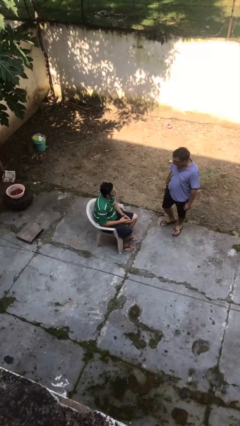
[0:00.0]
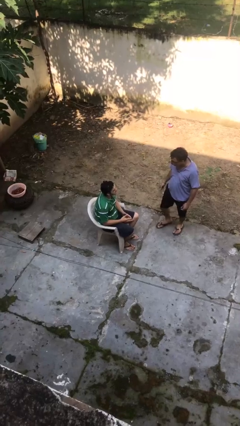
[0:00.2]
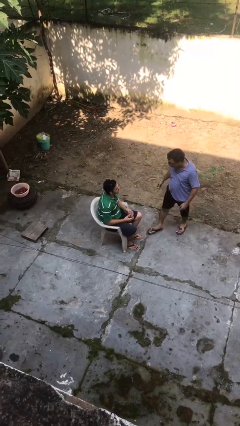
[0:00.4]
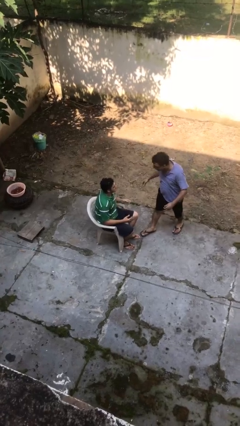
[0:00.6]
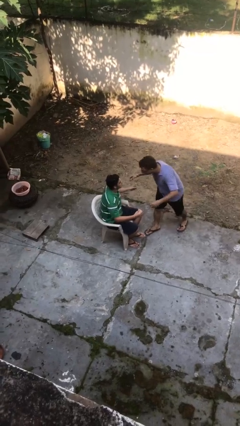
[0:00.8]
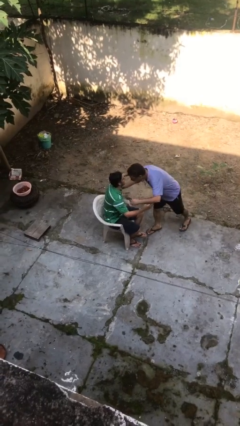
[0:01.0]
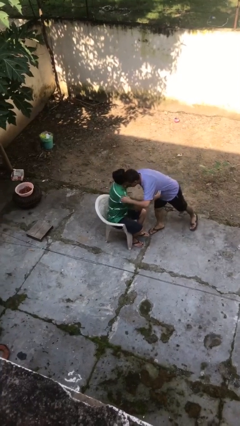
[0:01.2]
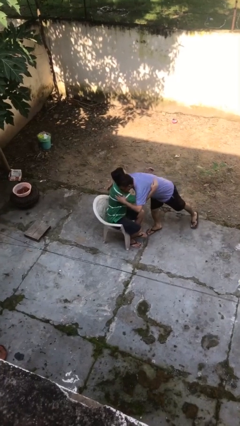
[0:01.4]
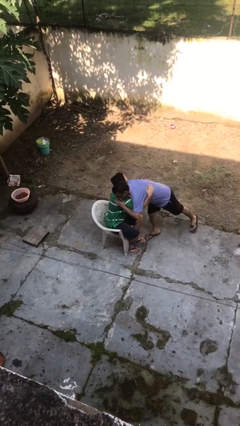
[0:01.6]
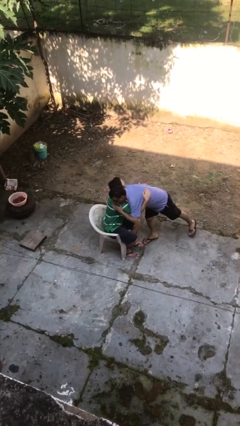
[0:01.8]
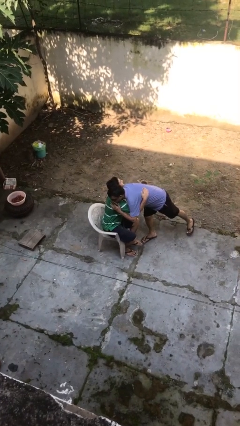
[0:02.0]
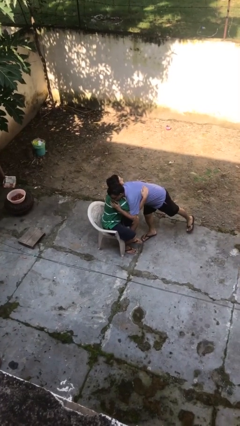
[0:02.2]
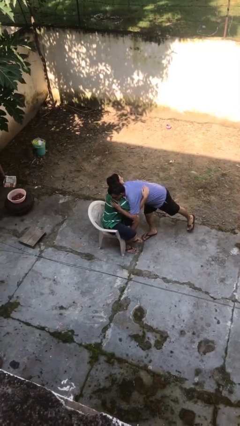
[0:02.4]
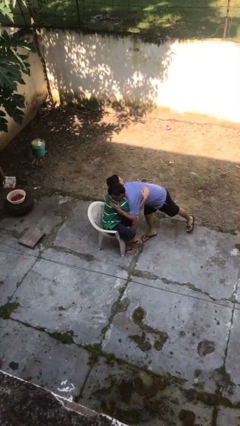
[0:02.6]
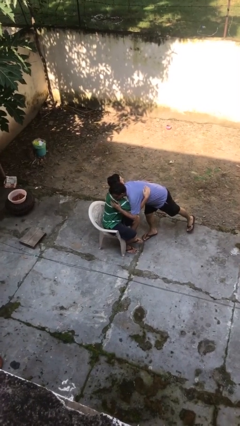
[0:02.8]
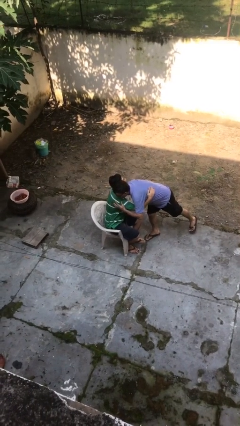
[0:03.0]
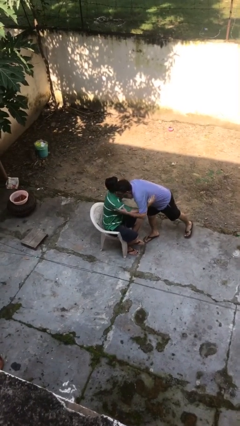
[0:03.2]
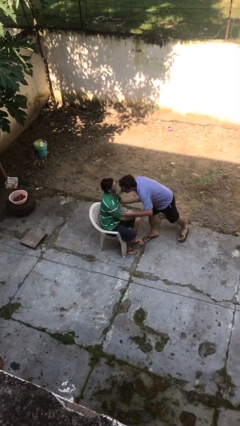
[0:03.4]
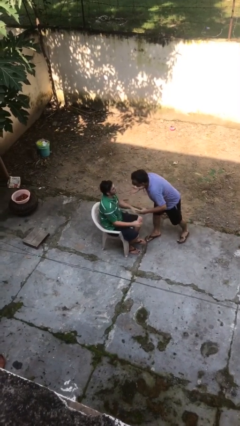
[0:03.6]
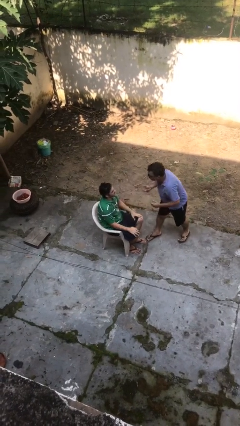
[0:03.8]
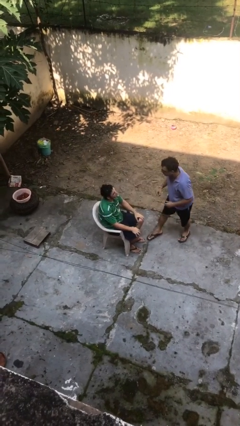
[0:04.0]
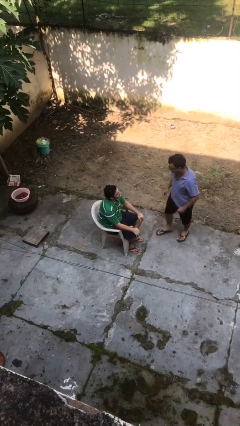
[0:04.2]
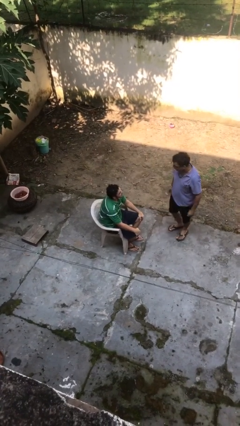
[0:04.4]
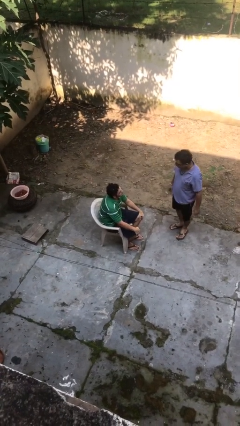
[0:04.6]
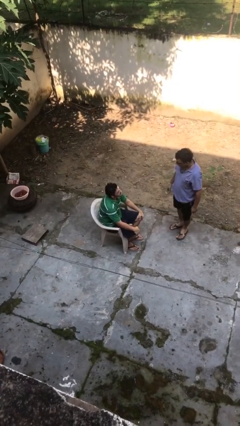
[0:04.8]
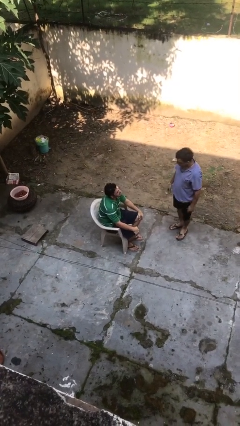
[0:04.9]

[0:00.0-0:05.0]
person embraces person

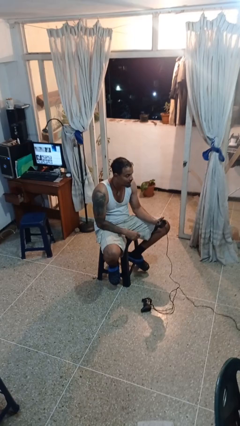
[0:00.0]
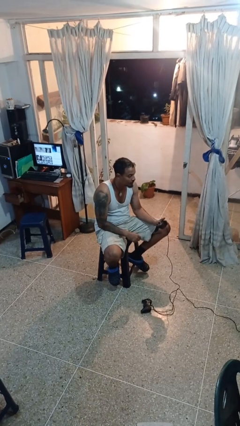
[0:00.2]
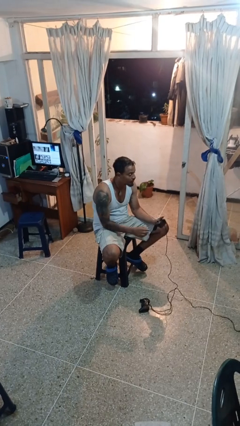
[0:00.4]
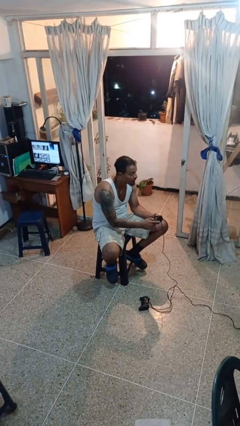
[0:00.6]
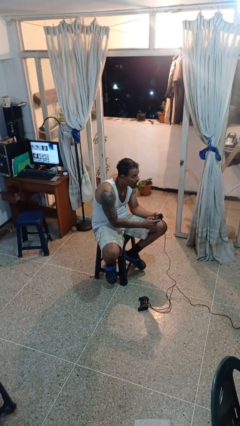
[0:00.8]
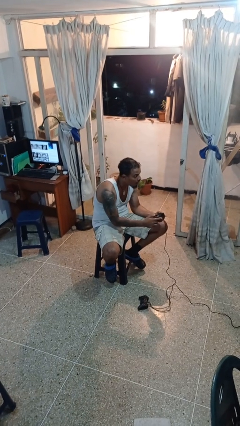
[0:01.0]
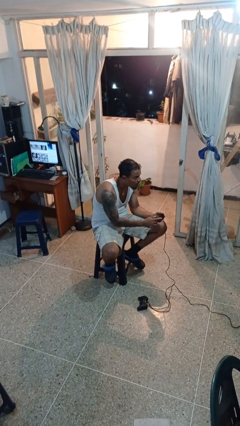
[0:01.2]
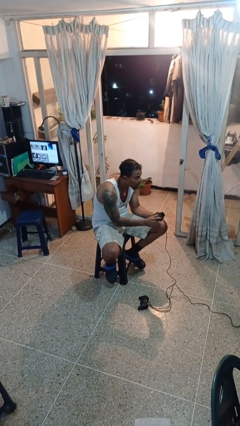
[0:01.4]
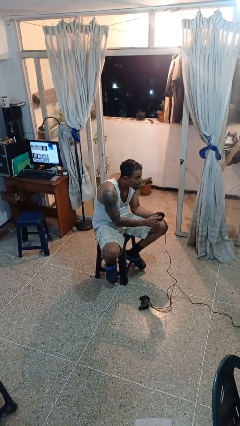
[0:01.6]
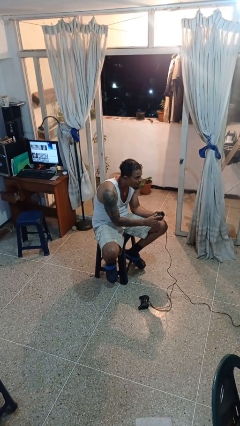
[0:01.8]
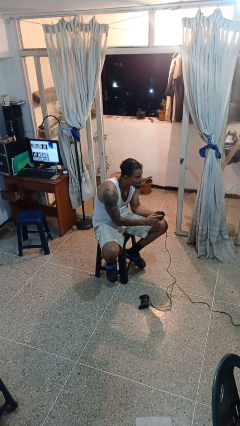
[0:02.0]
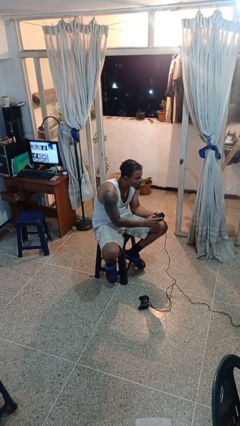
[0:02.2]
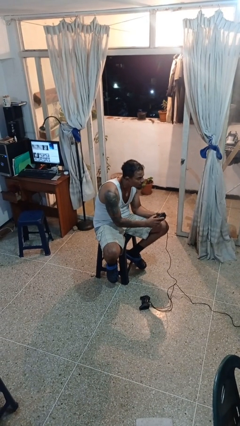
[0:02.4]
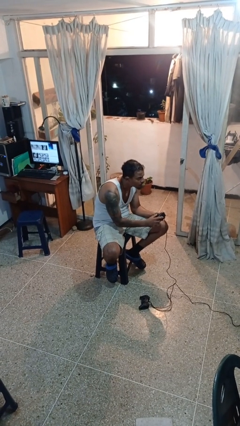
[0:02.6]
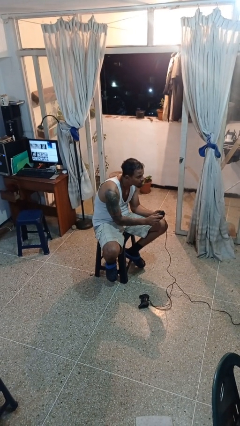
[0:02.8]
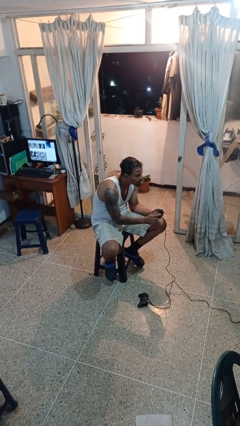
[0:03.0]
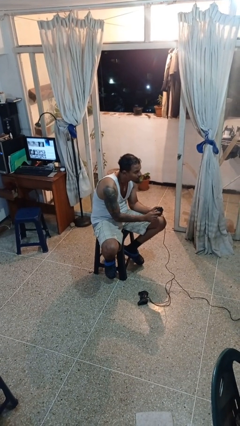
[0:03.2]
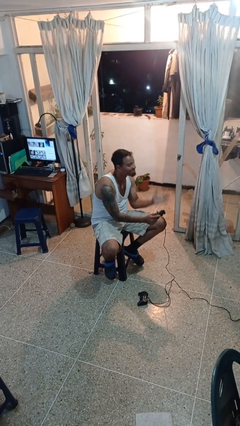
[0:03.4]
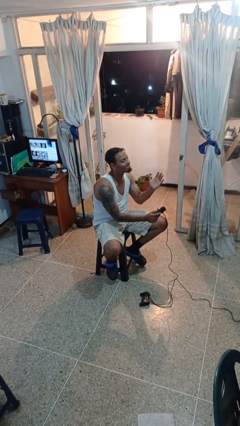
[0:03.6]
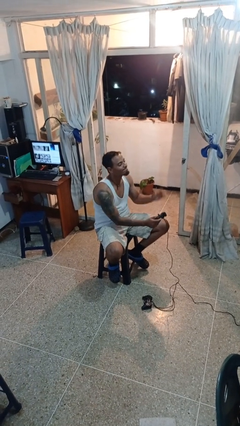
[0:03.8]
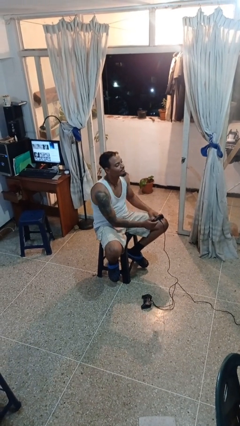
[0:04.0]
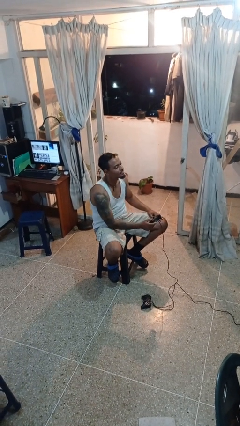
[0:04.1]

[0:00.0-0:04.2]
person interacts with handheld game

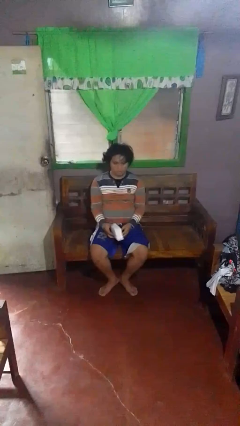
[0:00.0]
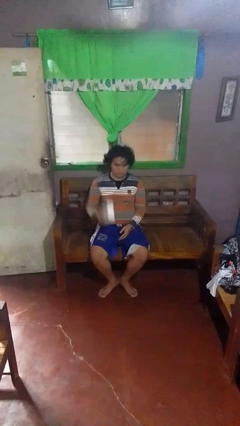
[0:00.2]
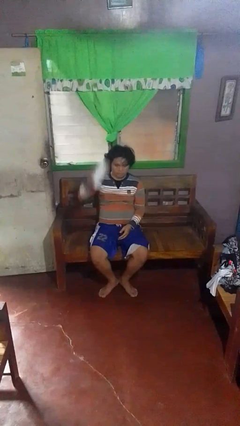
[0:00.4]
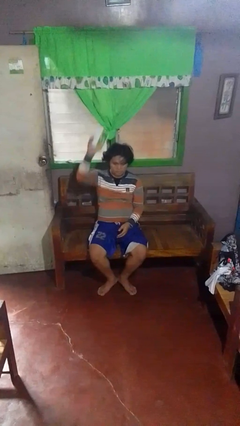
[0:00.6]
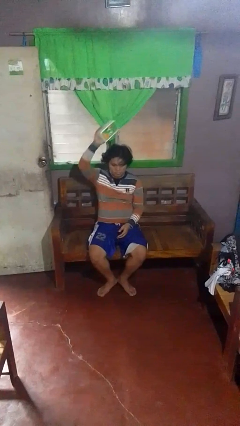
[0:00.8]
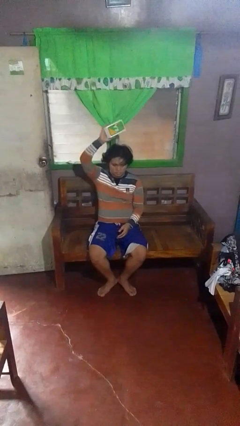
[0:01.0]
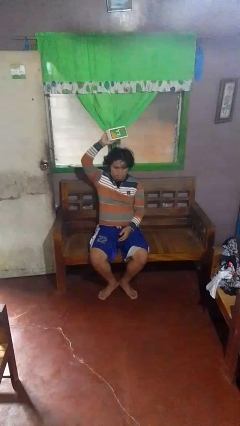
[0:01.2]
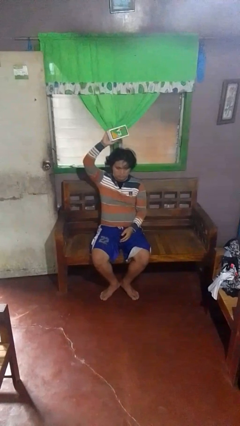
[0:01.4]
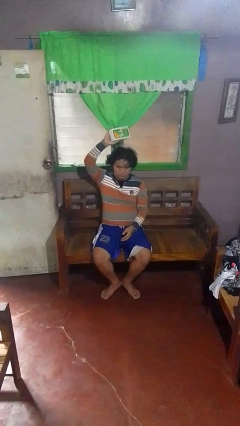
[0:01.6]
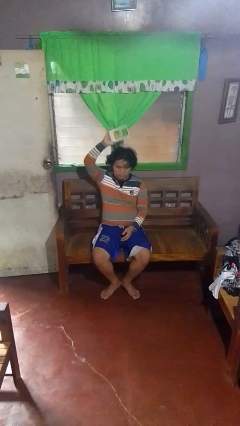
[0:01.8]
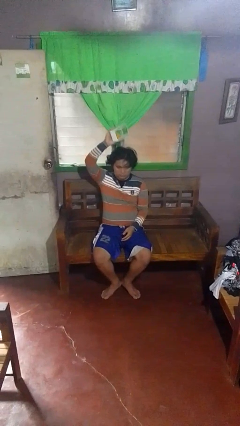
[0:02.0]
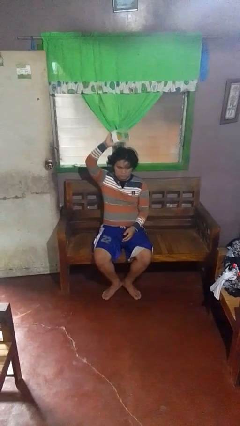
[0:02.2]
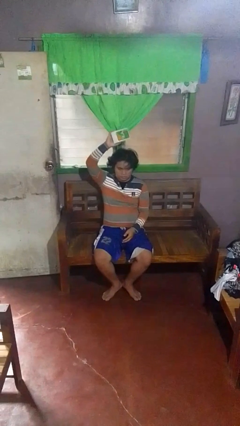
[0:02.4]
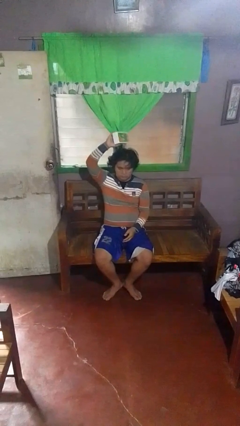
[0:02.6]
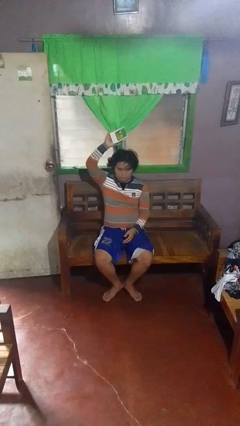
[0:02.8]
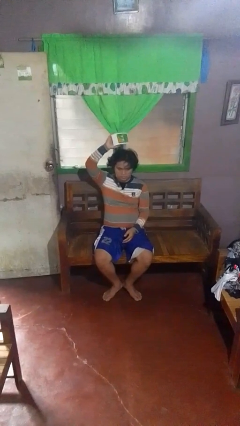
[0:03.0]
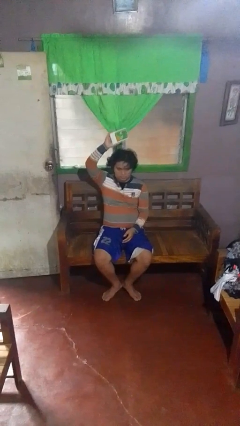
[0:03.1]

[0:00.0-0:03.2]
person holds object above head

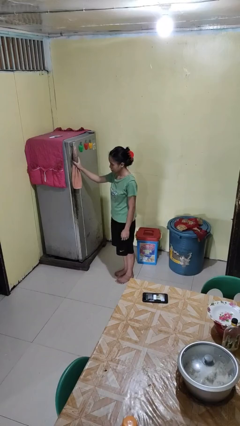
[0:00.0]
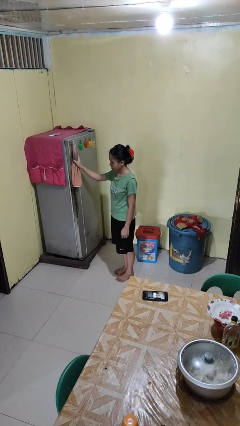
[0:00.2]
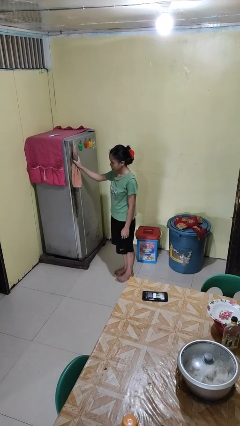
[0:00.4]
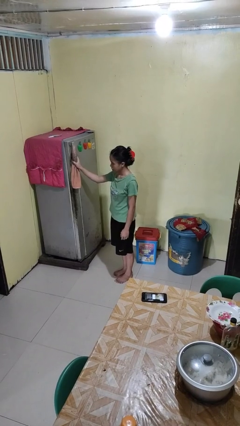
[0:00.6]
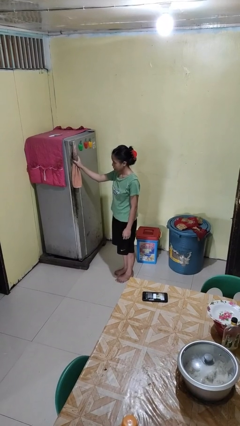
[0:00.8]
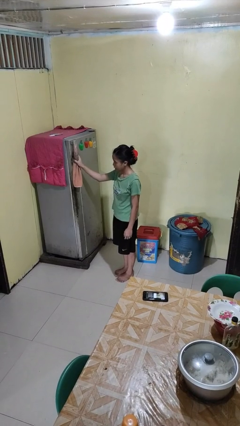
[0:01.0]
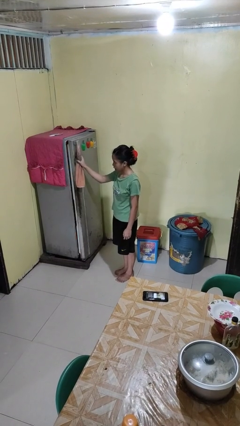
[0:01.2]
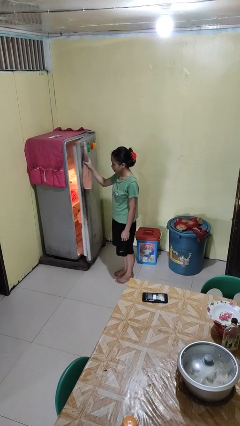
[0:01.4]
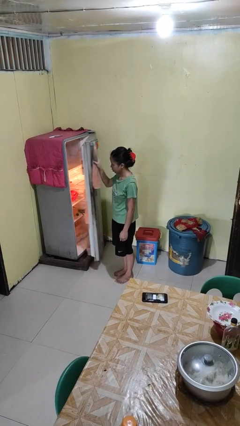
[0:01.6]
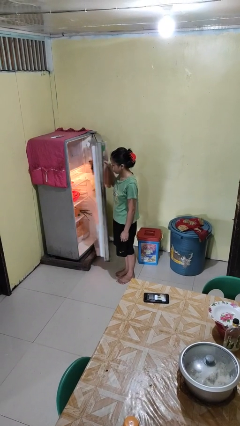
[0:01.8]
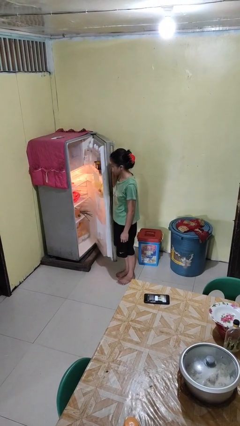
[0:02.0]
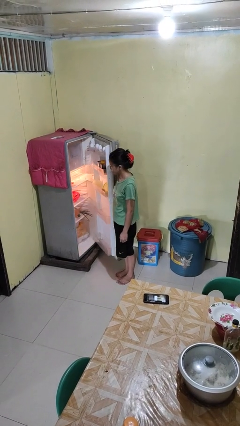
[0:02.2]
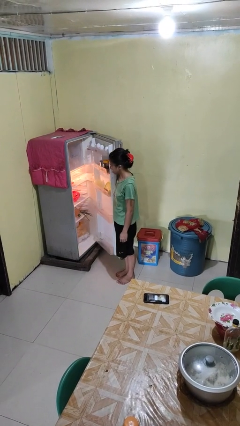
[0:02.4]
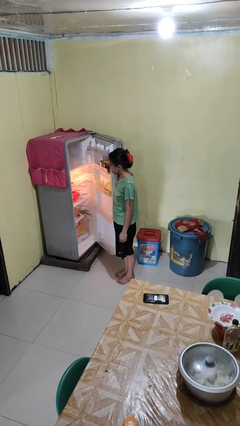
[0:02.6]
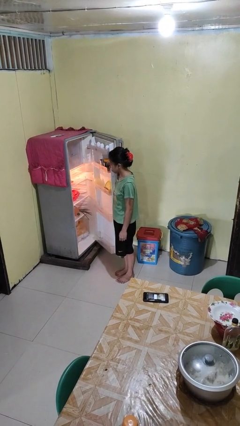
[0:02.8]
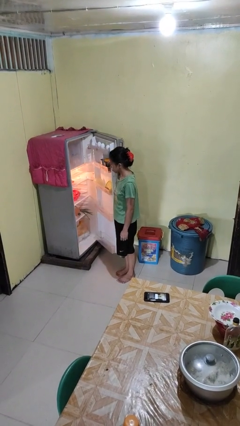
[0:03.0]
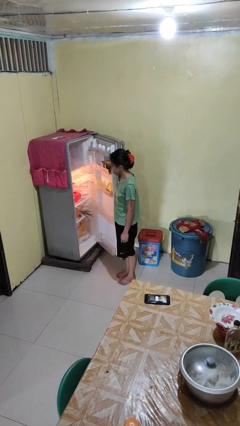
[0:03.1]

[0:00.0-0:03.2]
person opens refrigerator

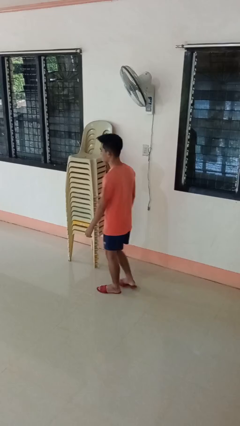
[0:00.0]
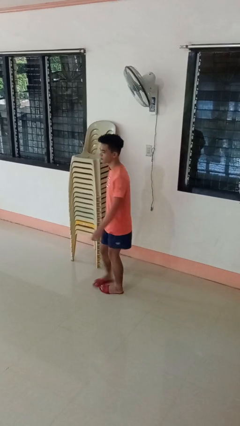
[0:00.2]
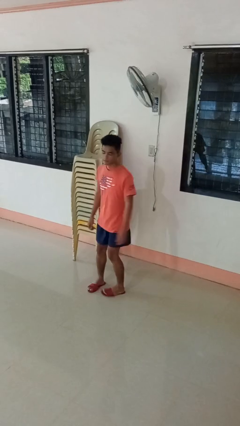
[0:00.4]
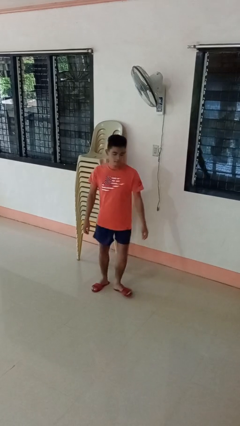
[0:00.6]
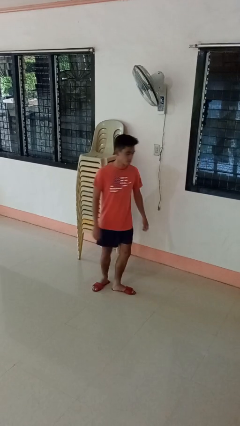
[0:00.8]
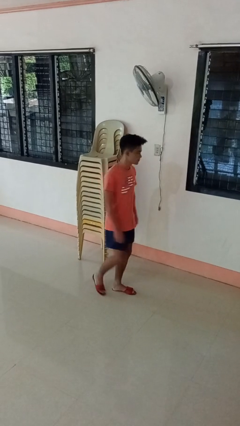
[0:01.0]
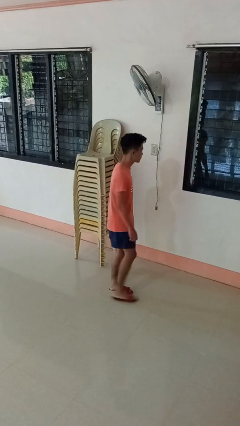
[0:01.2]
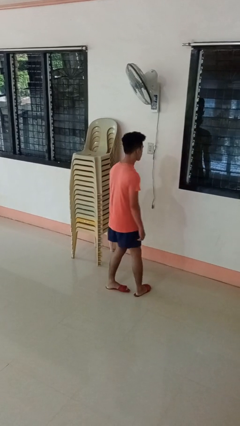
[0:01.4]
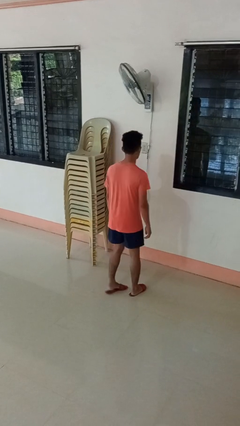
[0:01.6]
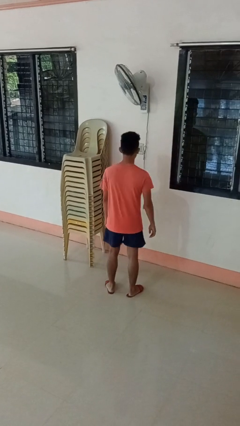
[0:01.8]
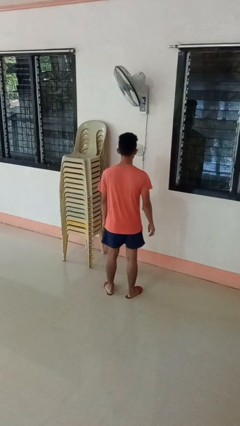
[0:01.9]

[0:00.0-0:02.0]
person twirls

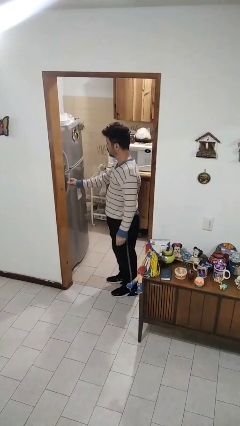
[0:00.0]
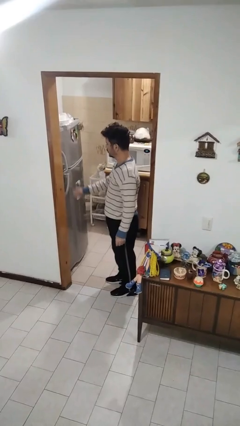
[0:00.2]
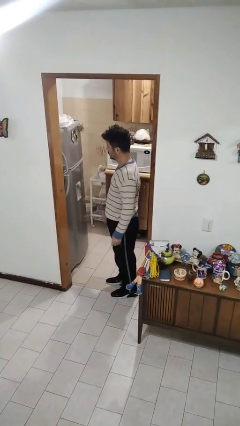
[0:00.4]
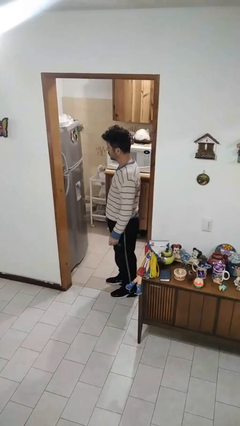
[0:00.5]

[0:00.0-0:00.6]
person closes refrigerator
